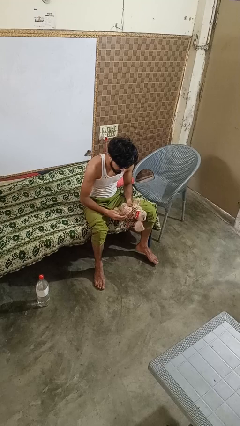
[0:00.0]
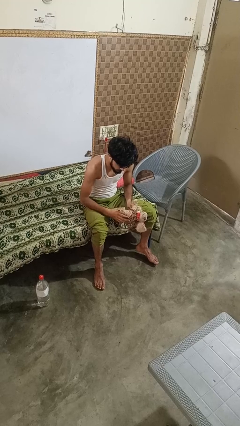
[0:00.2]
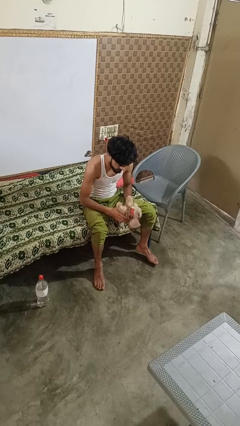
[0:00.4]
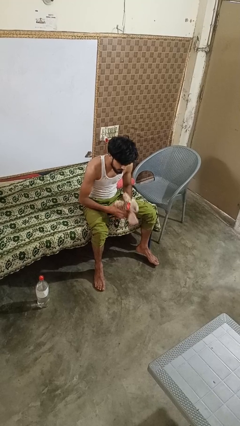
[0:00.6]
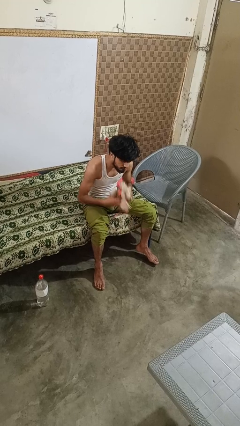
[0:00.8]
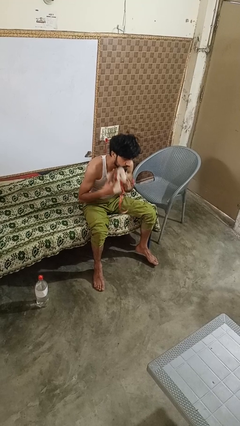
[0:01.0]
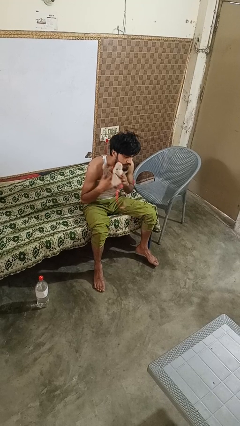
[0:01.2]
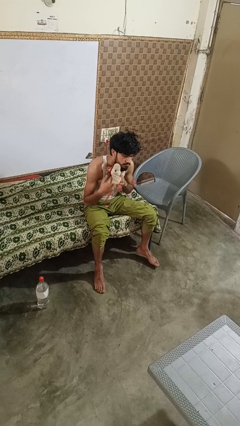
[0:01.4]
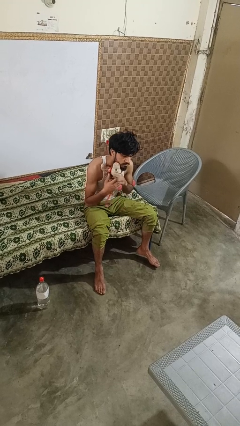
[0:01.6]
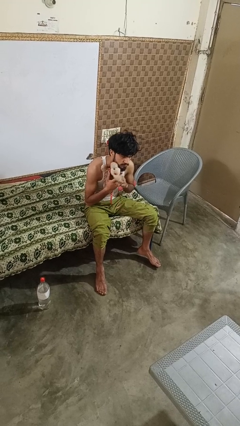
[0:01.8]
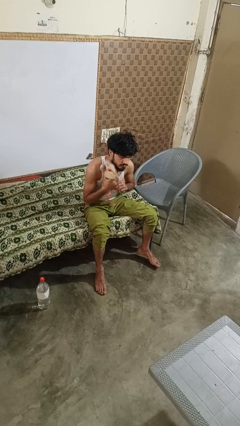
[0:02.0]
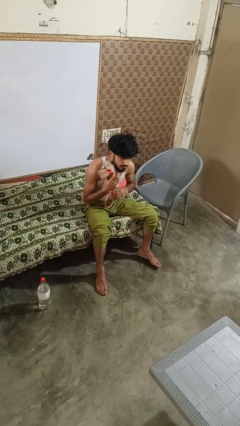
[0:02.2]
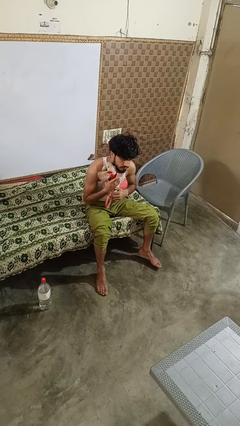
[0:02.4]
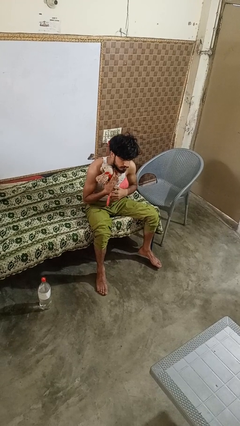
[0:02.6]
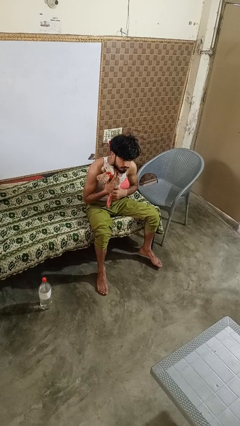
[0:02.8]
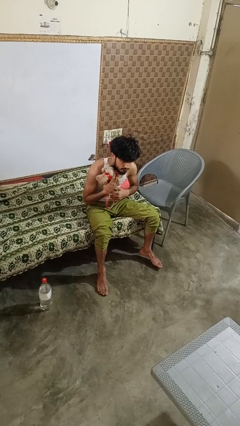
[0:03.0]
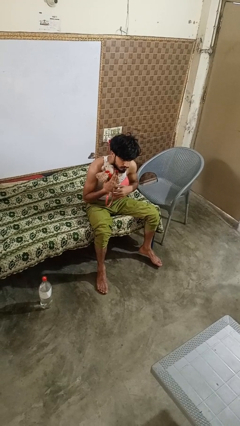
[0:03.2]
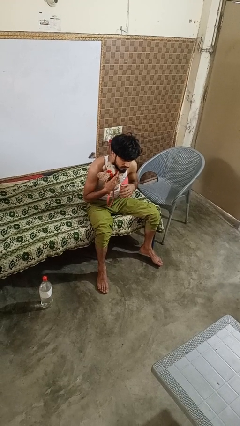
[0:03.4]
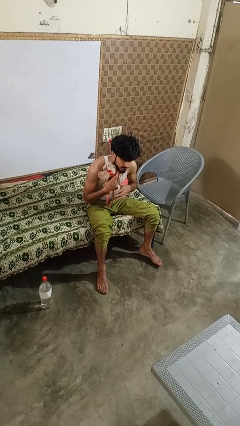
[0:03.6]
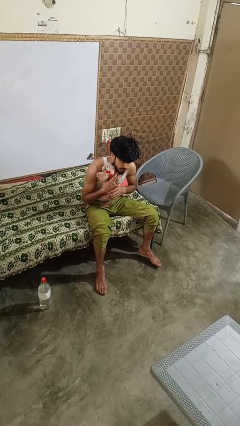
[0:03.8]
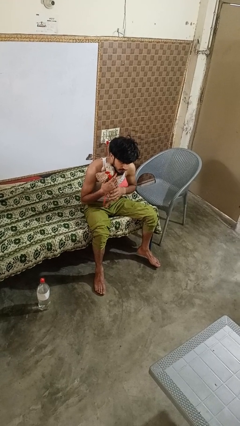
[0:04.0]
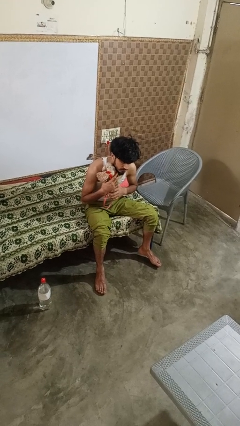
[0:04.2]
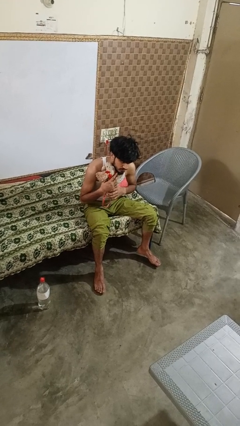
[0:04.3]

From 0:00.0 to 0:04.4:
person hugs stuffed animal

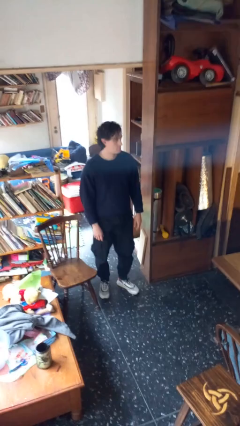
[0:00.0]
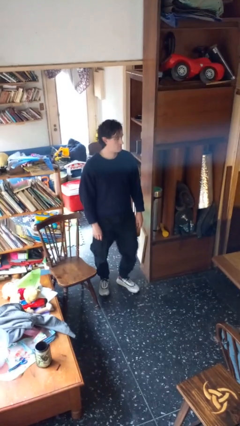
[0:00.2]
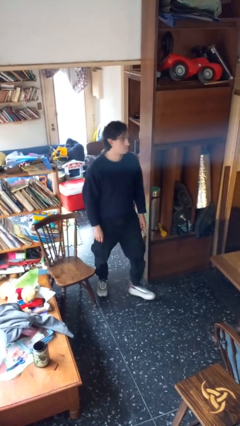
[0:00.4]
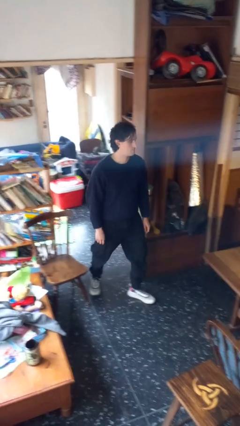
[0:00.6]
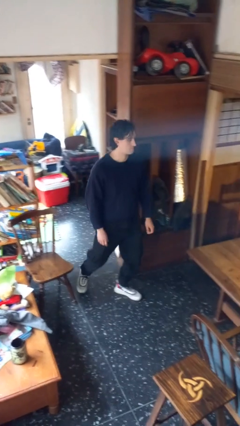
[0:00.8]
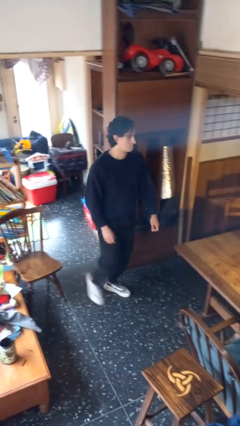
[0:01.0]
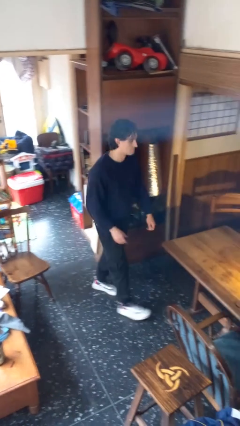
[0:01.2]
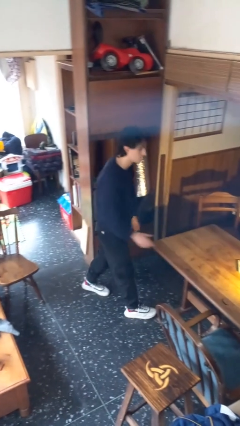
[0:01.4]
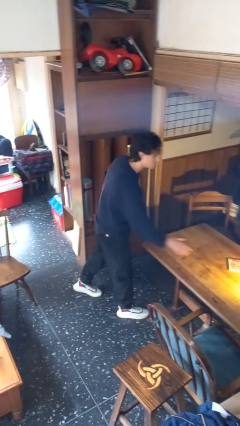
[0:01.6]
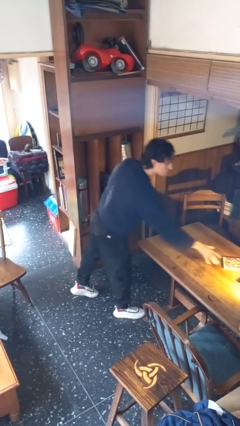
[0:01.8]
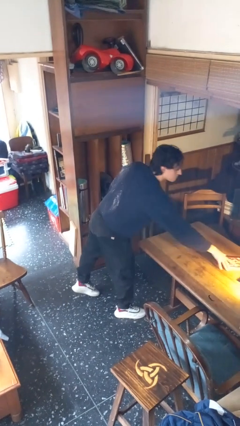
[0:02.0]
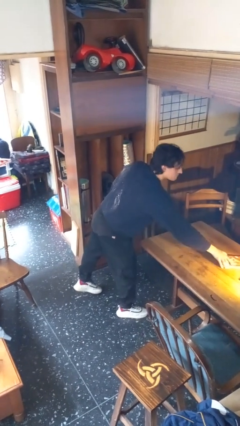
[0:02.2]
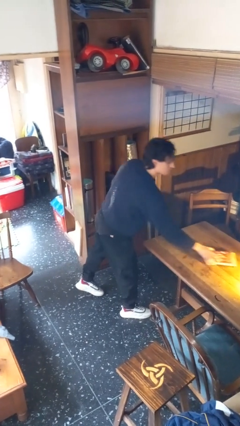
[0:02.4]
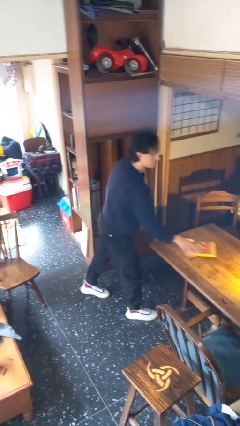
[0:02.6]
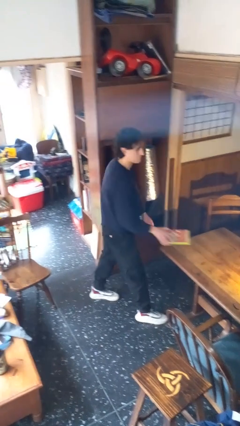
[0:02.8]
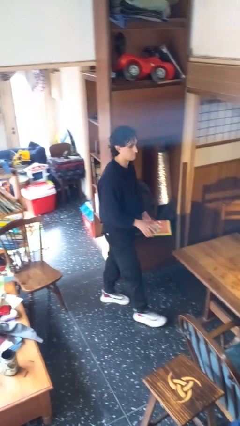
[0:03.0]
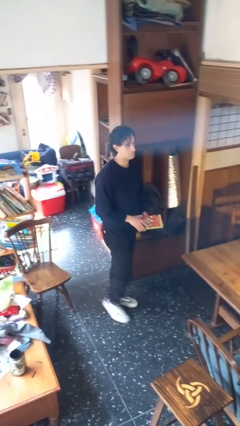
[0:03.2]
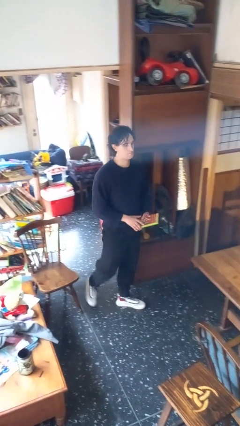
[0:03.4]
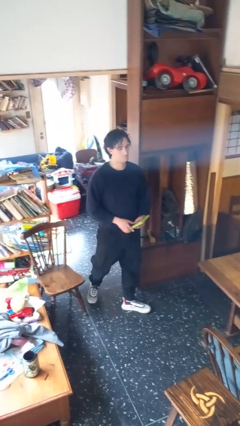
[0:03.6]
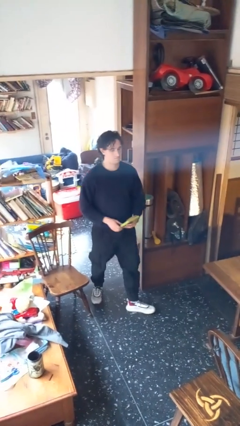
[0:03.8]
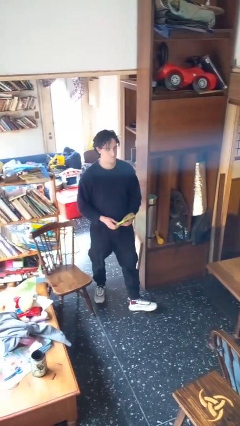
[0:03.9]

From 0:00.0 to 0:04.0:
person picks up object from table

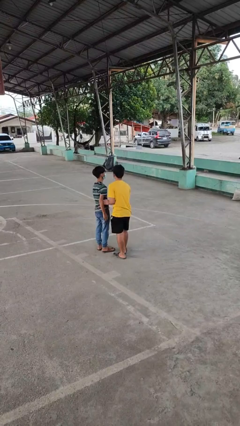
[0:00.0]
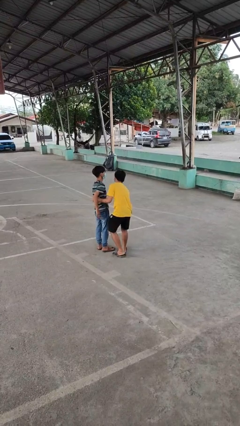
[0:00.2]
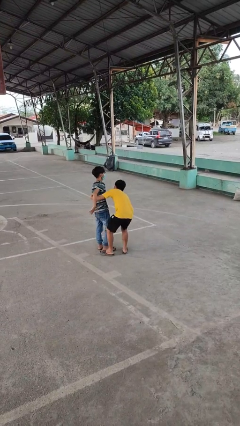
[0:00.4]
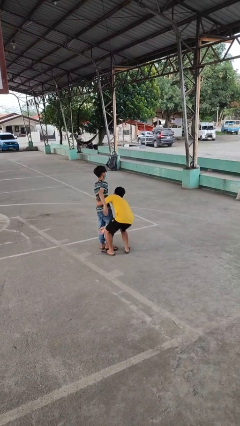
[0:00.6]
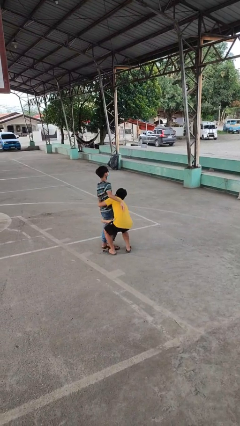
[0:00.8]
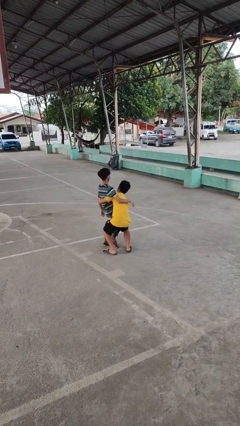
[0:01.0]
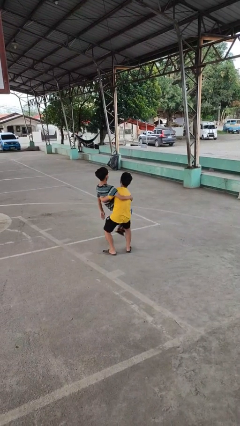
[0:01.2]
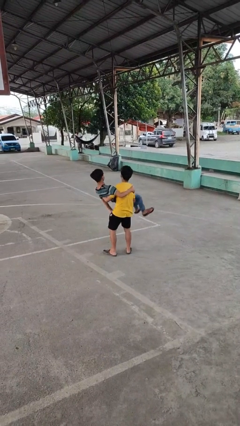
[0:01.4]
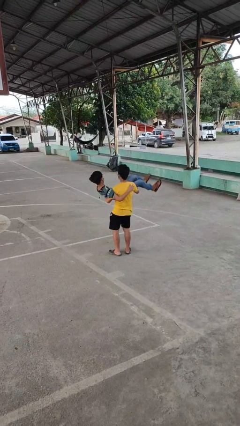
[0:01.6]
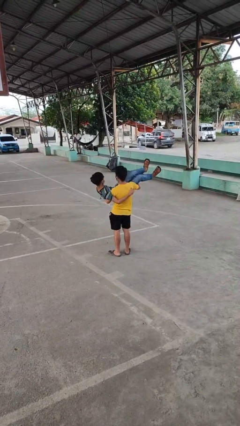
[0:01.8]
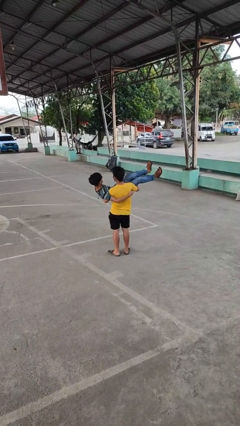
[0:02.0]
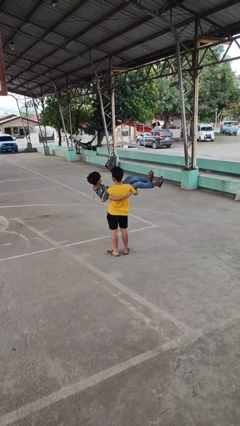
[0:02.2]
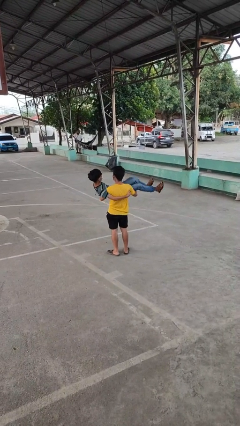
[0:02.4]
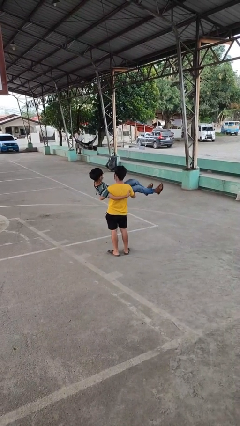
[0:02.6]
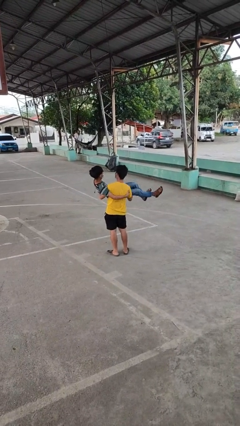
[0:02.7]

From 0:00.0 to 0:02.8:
person picks up person

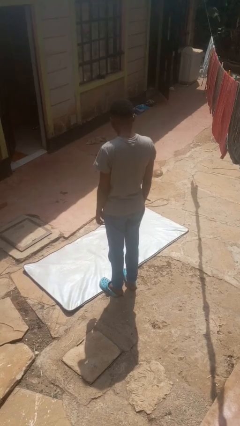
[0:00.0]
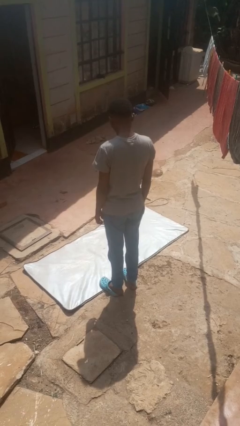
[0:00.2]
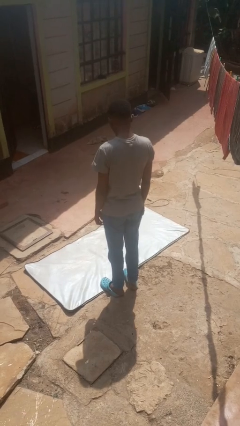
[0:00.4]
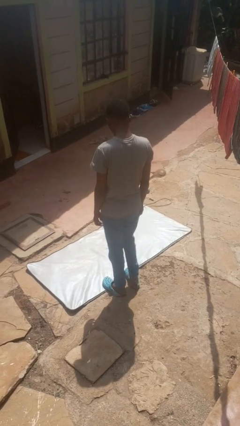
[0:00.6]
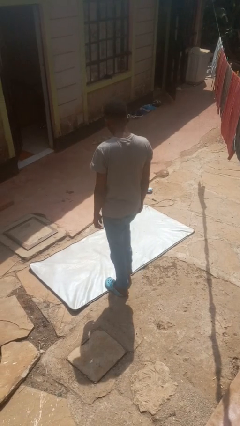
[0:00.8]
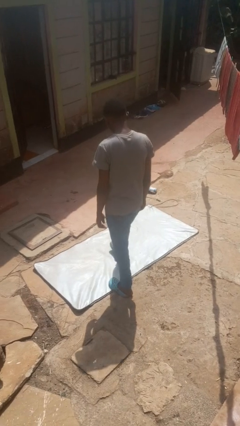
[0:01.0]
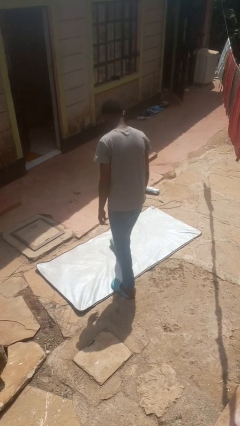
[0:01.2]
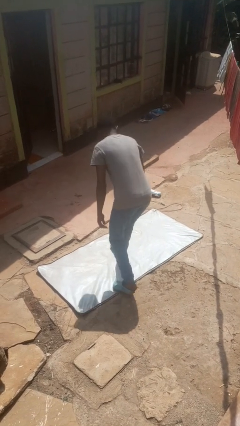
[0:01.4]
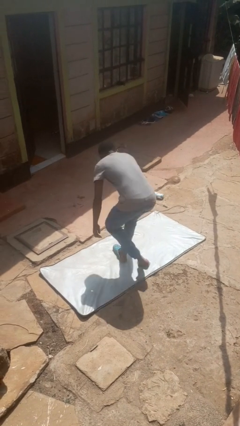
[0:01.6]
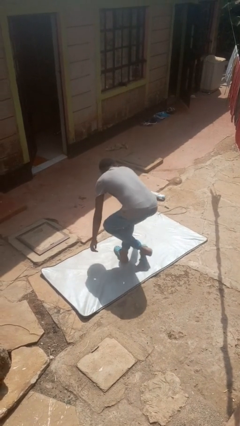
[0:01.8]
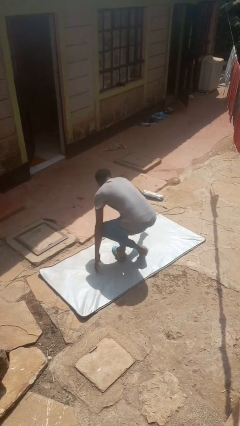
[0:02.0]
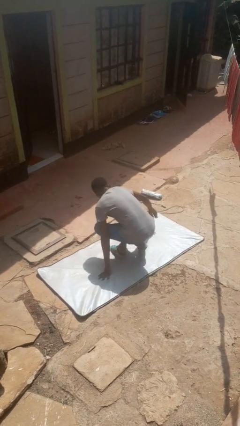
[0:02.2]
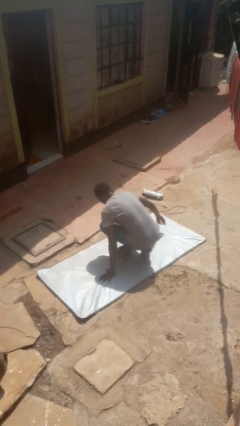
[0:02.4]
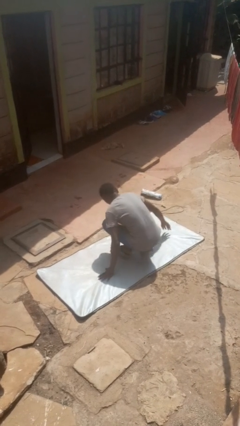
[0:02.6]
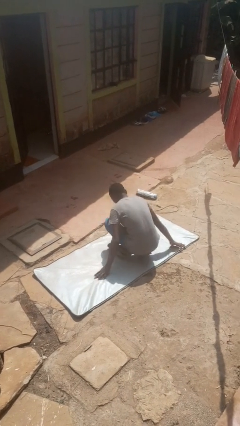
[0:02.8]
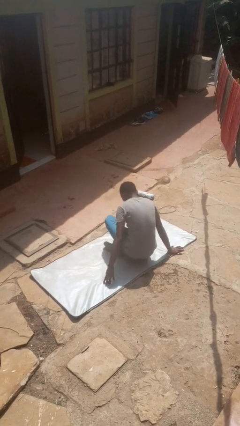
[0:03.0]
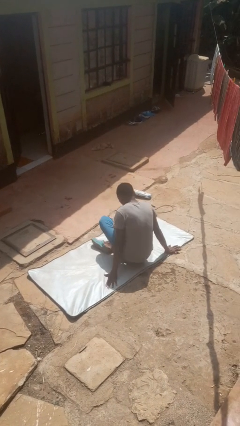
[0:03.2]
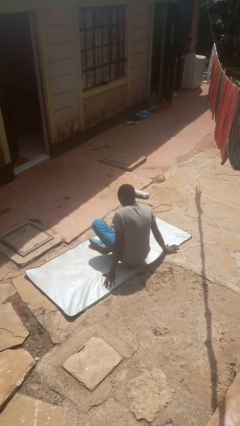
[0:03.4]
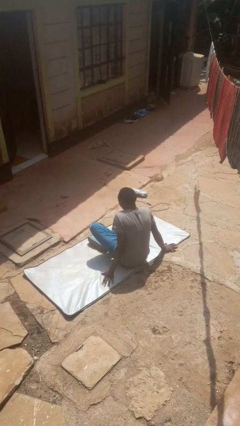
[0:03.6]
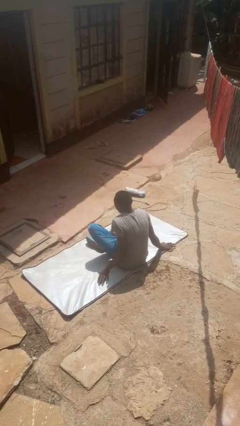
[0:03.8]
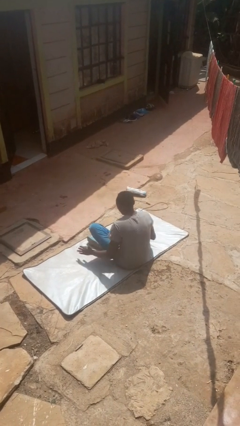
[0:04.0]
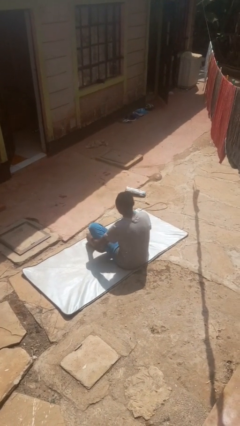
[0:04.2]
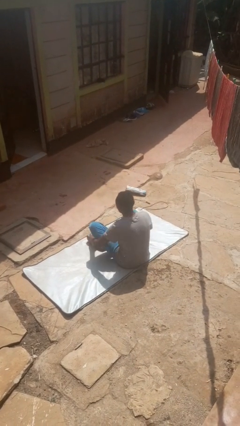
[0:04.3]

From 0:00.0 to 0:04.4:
person sits crisscross

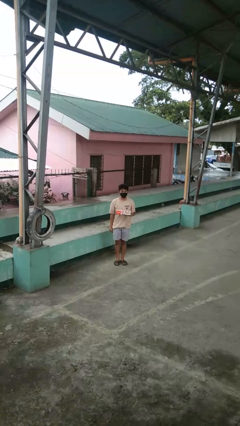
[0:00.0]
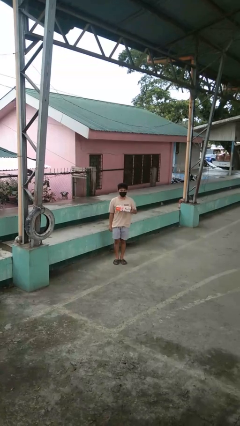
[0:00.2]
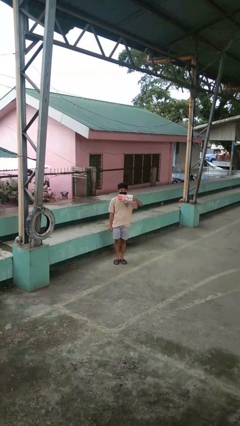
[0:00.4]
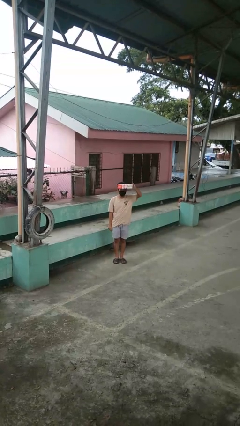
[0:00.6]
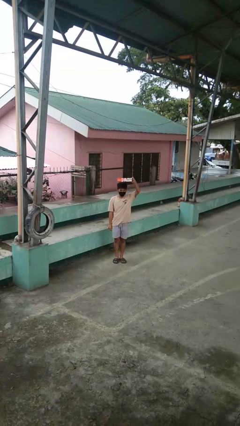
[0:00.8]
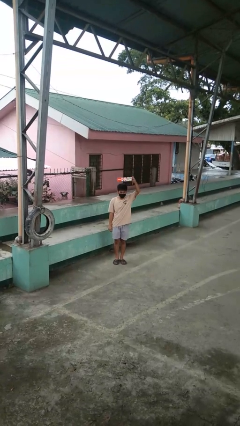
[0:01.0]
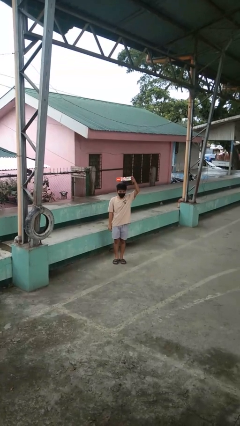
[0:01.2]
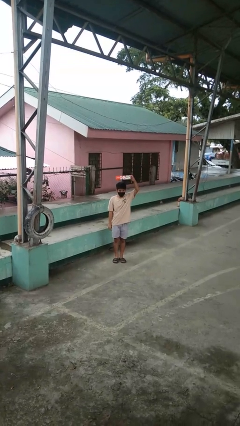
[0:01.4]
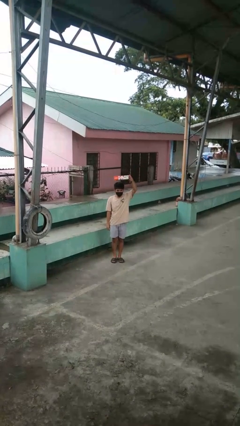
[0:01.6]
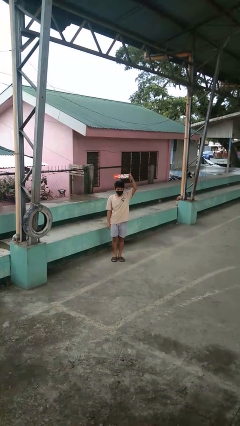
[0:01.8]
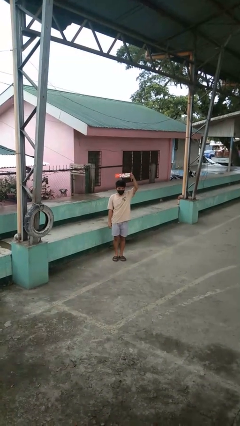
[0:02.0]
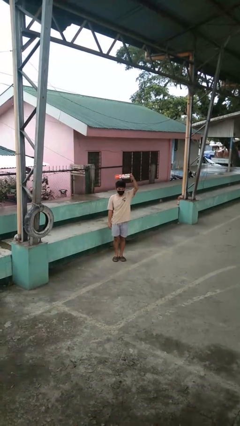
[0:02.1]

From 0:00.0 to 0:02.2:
person holds object above head
